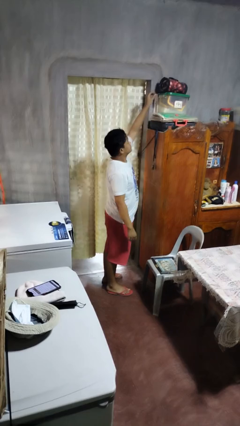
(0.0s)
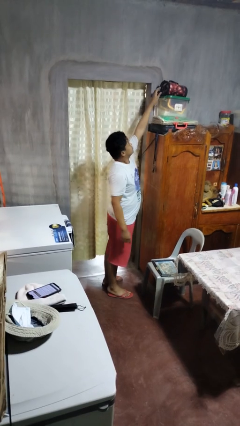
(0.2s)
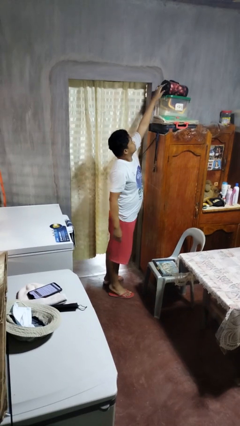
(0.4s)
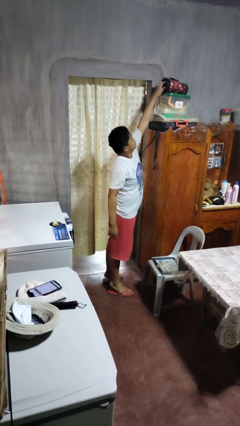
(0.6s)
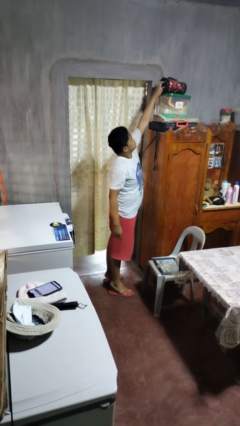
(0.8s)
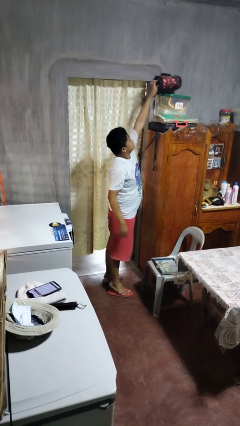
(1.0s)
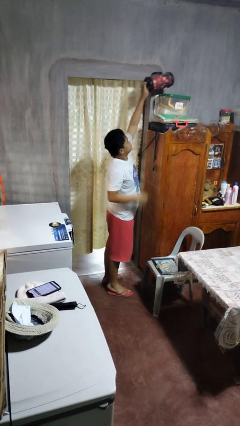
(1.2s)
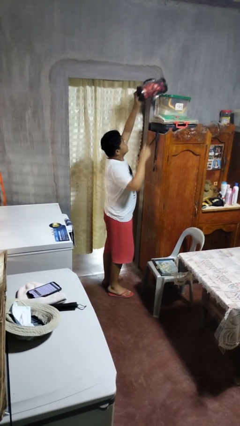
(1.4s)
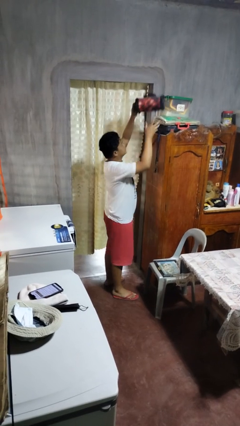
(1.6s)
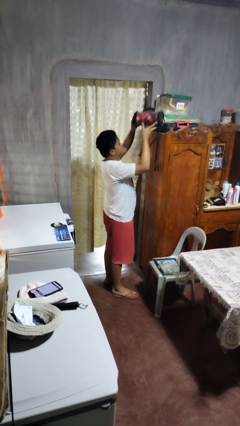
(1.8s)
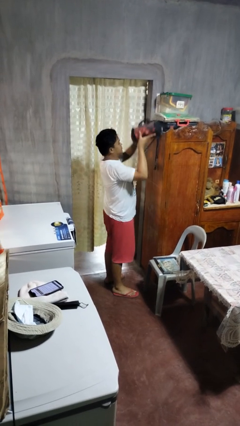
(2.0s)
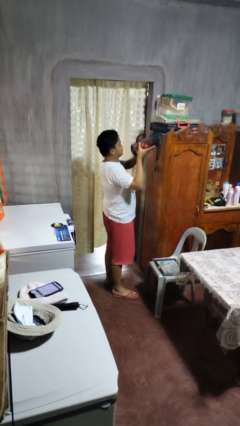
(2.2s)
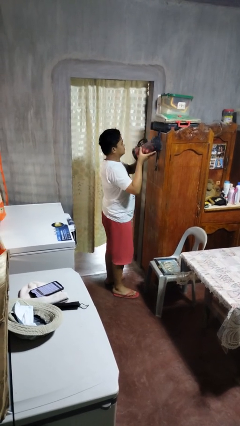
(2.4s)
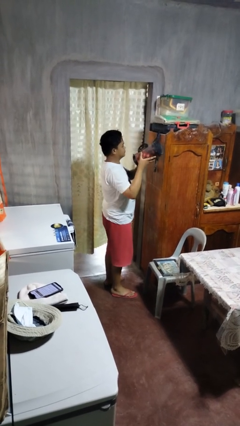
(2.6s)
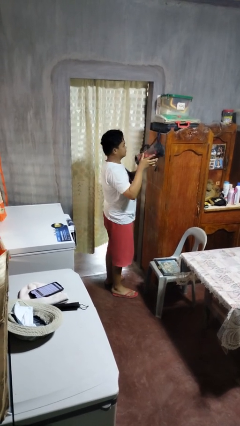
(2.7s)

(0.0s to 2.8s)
person picks up object from shelf

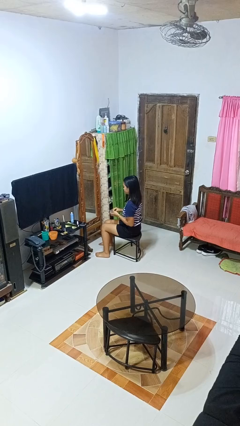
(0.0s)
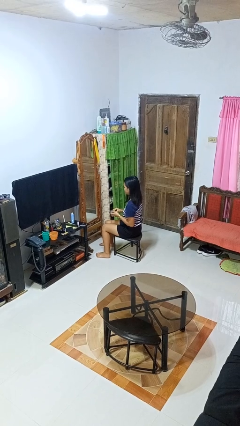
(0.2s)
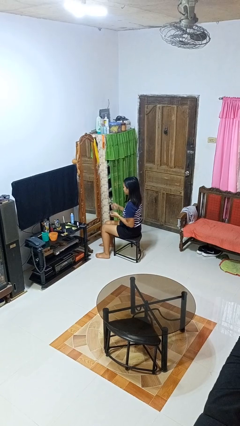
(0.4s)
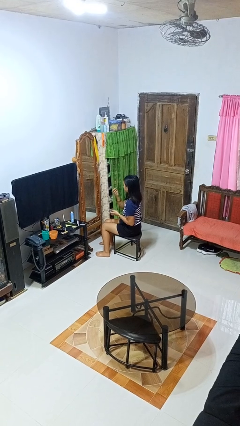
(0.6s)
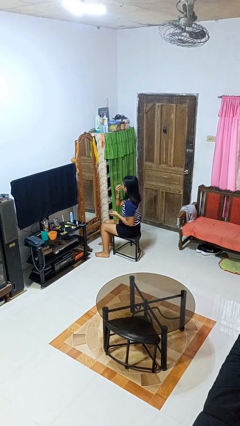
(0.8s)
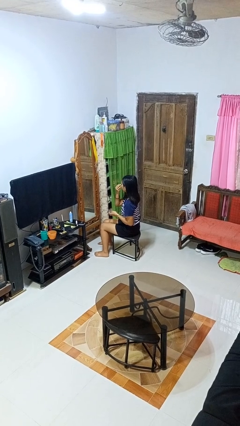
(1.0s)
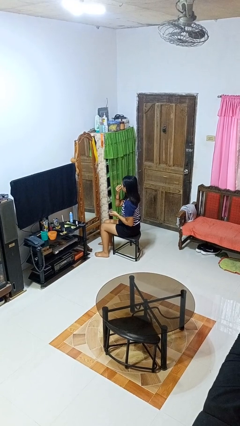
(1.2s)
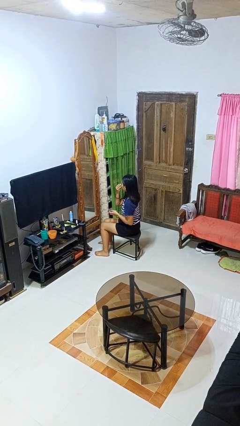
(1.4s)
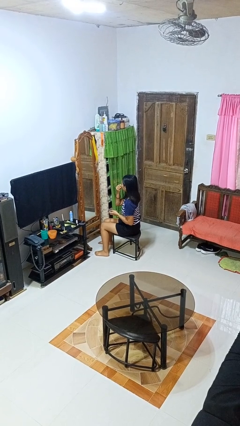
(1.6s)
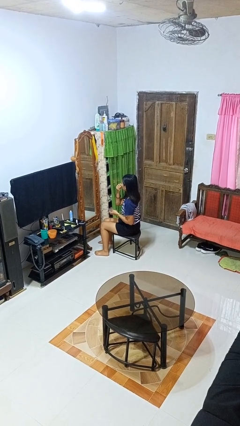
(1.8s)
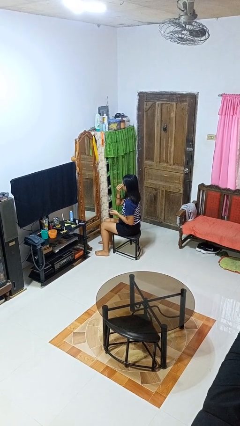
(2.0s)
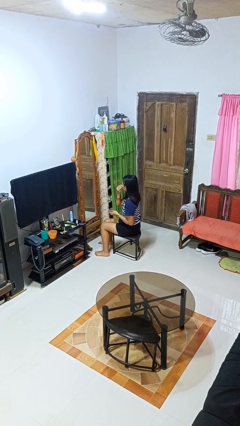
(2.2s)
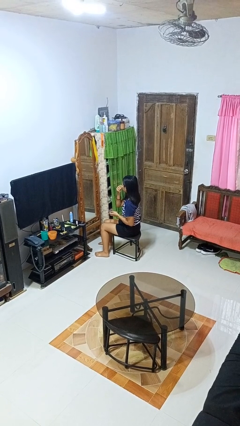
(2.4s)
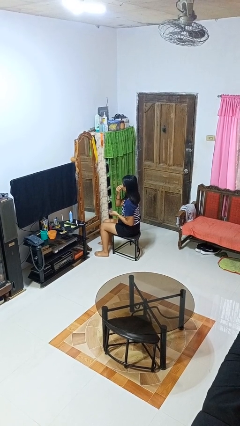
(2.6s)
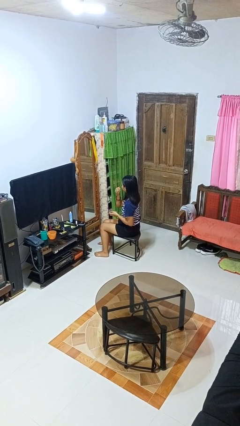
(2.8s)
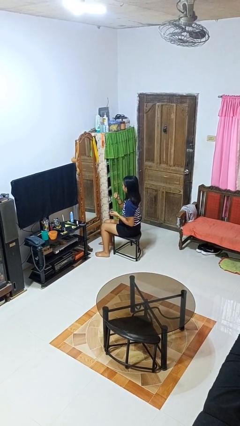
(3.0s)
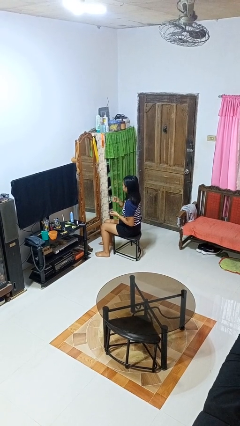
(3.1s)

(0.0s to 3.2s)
person applies eye makeup

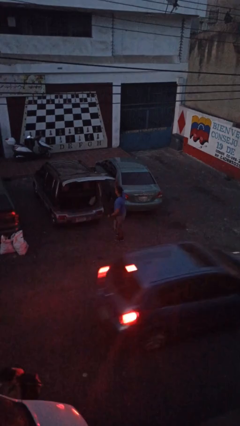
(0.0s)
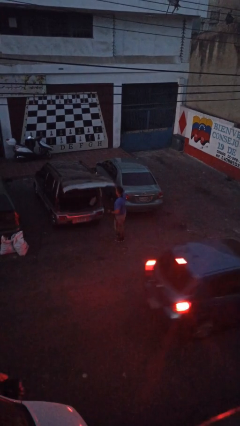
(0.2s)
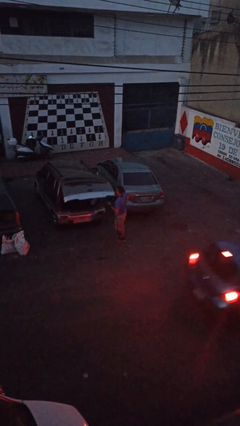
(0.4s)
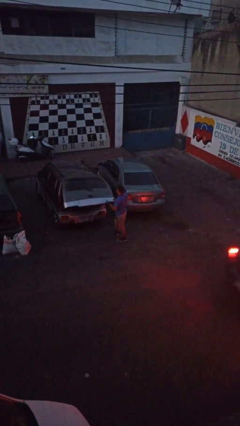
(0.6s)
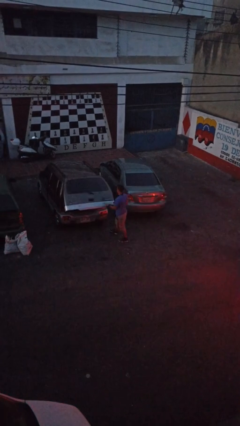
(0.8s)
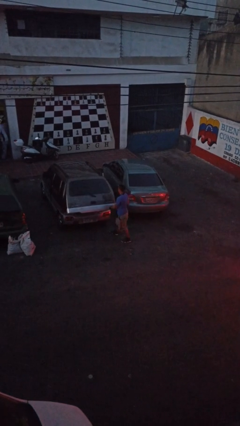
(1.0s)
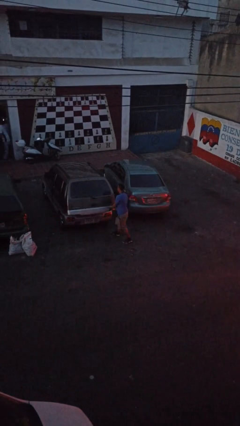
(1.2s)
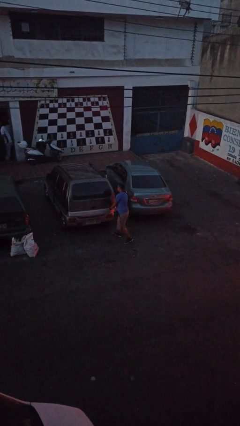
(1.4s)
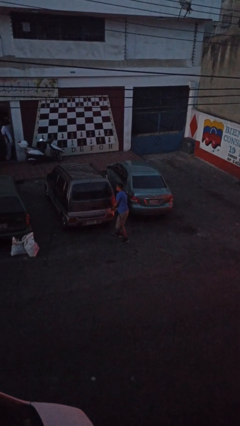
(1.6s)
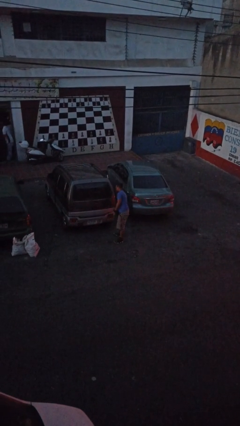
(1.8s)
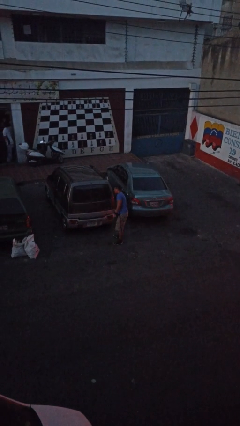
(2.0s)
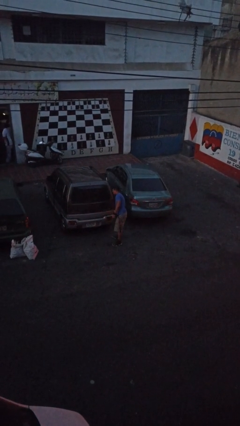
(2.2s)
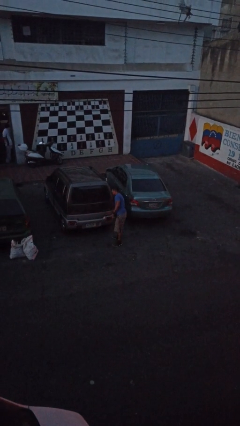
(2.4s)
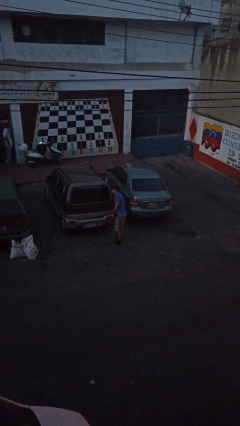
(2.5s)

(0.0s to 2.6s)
person closes car trunk

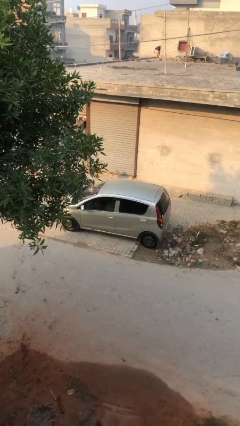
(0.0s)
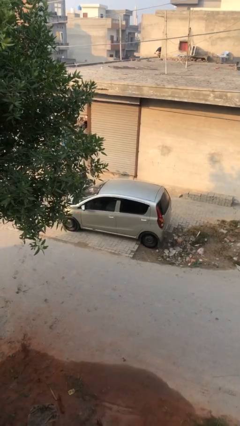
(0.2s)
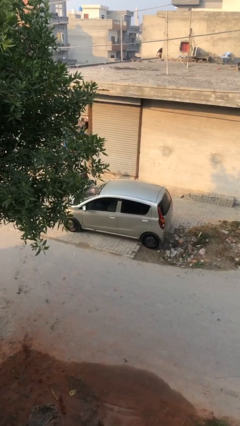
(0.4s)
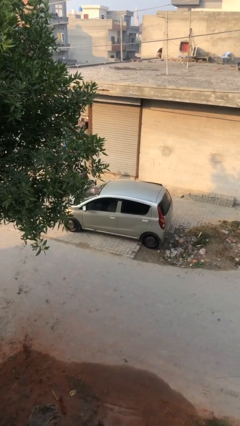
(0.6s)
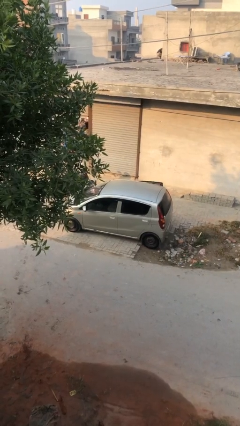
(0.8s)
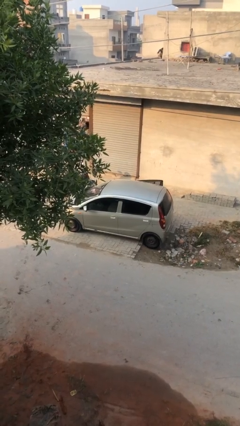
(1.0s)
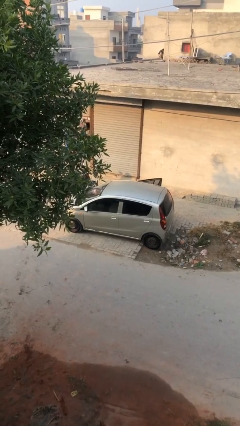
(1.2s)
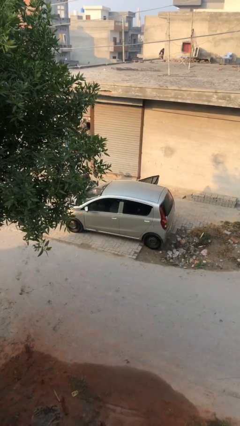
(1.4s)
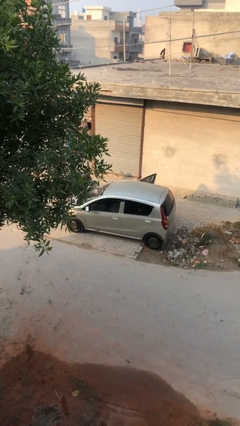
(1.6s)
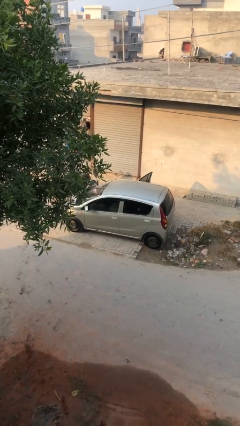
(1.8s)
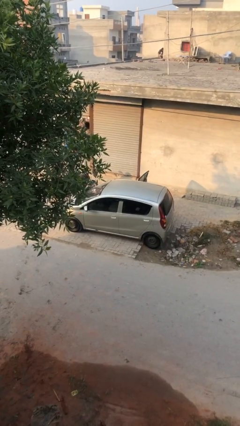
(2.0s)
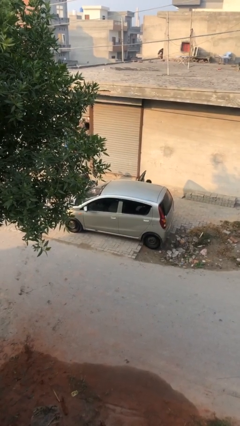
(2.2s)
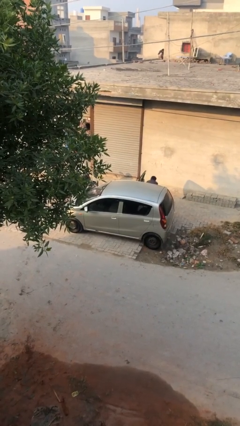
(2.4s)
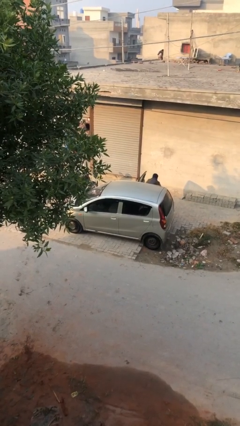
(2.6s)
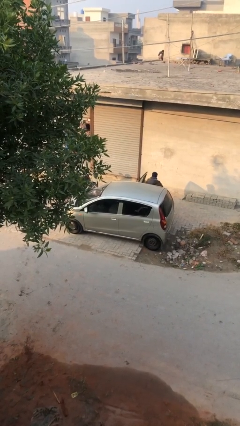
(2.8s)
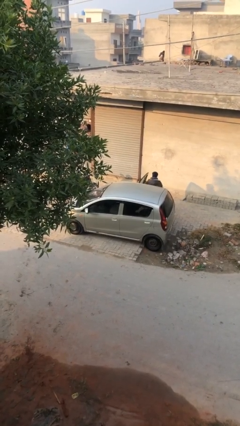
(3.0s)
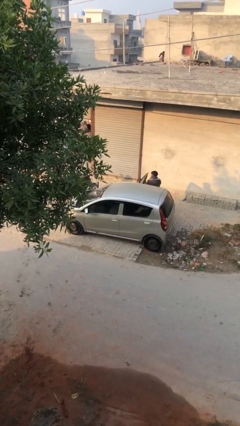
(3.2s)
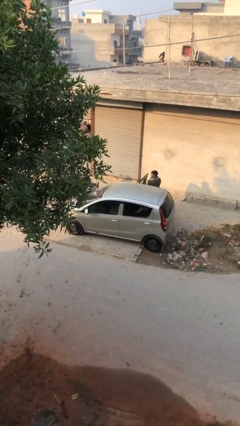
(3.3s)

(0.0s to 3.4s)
car drops off person

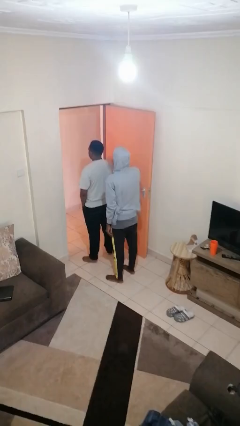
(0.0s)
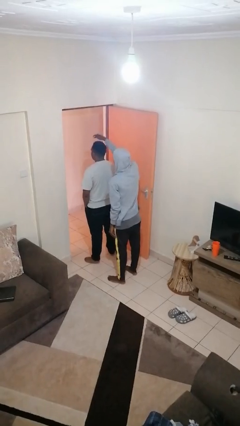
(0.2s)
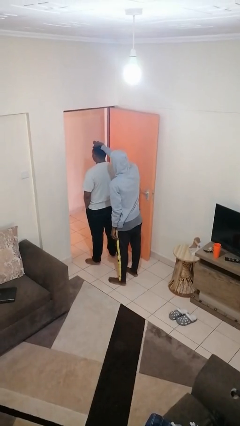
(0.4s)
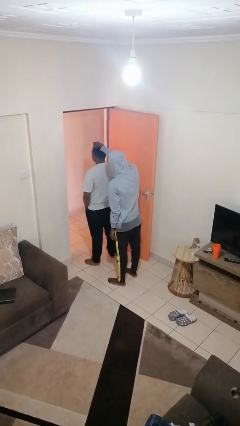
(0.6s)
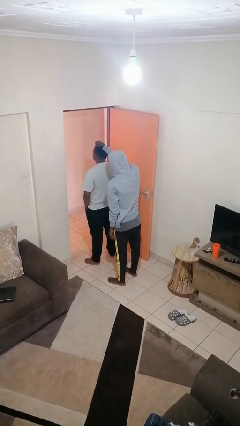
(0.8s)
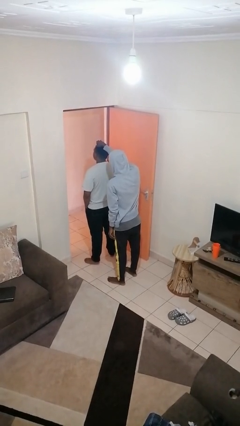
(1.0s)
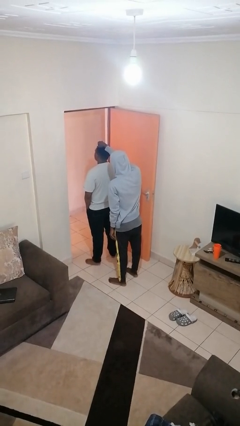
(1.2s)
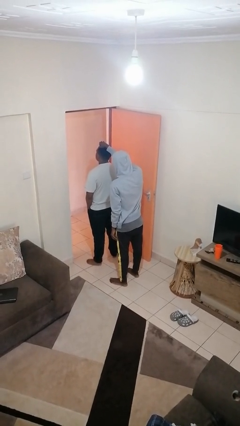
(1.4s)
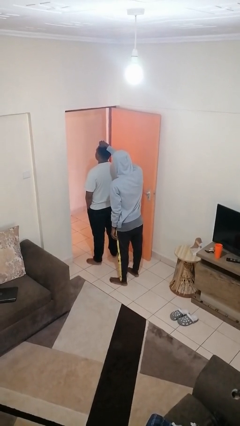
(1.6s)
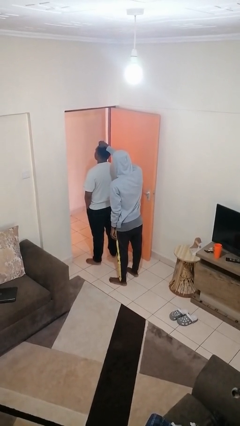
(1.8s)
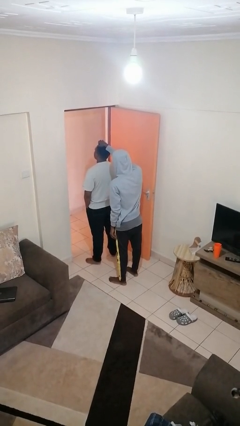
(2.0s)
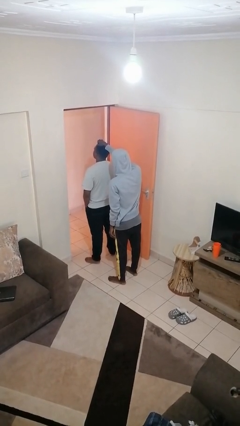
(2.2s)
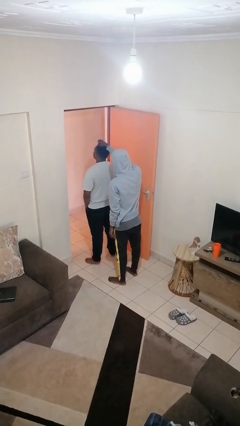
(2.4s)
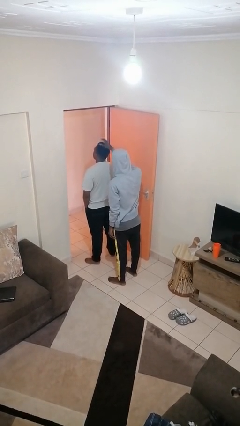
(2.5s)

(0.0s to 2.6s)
person grabs person by hair

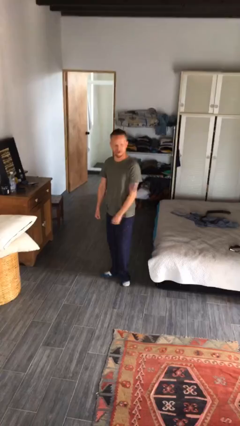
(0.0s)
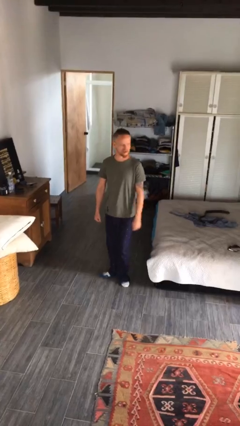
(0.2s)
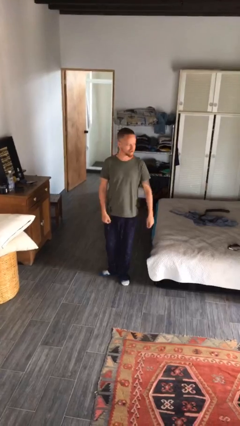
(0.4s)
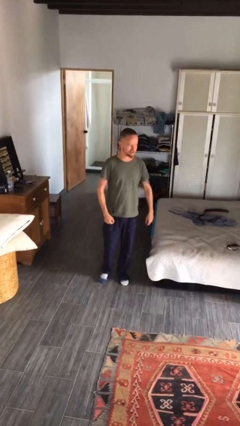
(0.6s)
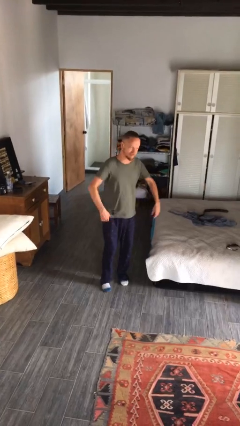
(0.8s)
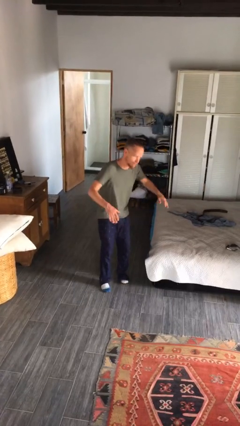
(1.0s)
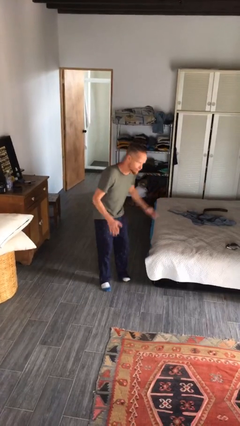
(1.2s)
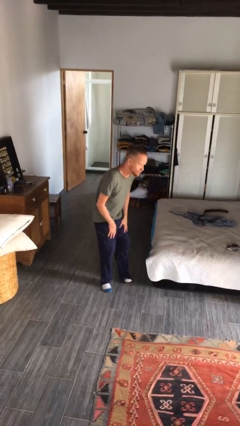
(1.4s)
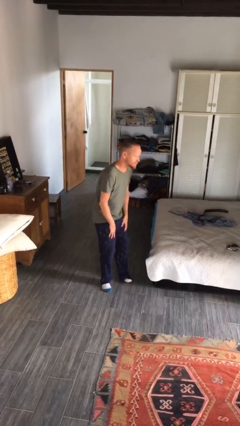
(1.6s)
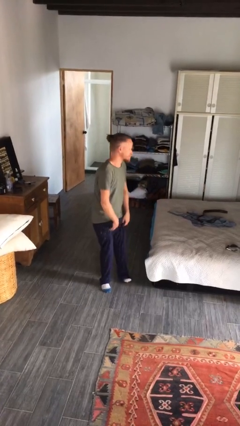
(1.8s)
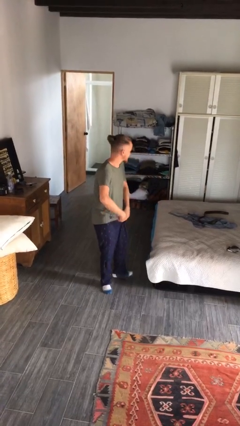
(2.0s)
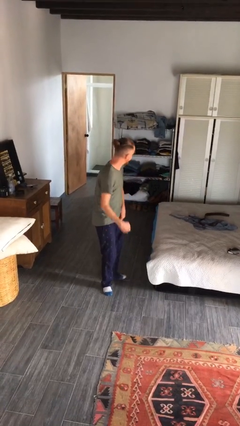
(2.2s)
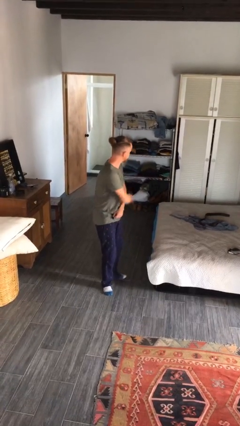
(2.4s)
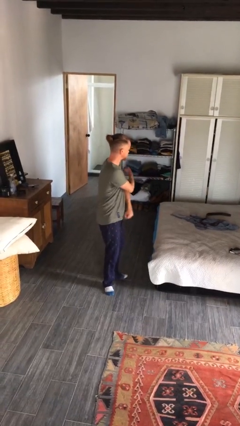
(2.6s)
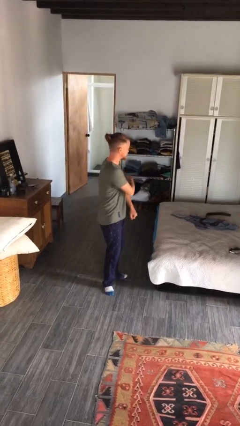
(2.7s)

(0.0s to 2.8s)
person slaps hands on thighs

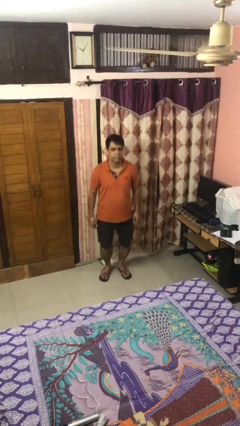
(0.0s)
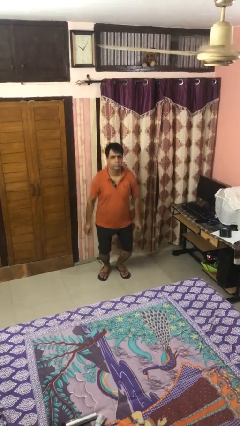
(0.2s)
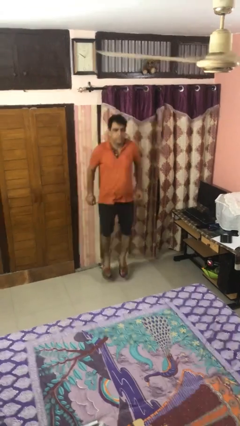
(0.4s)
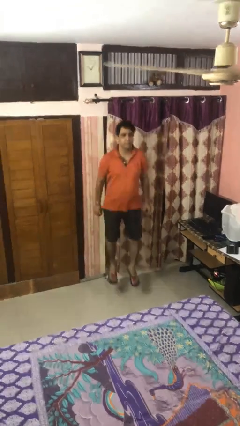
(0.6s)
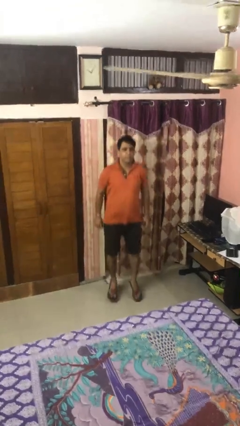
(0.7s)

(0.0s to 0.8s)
person jumps
